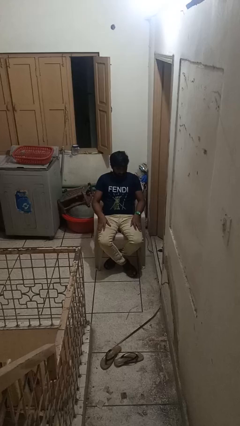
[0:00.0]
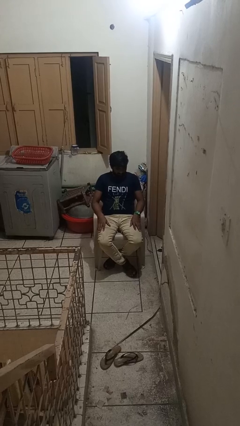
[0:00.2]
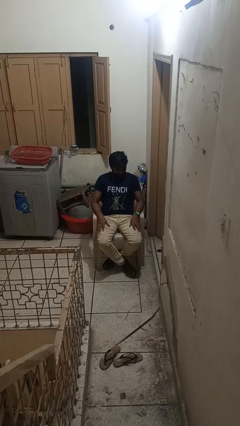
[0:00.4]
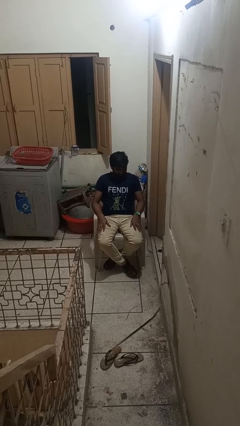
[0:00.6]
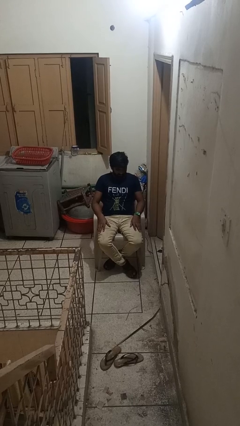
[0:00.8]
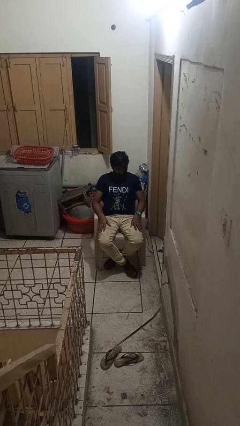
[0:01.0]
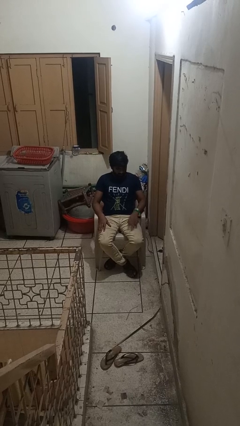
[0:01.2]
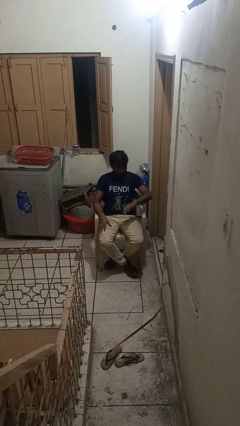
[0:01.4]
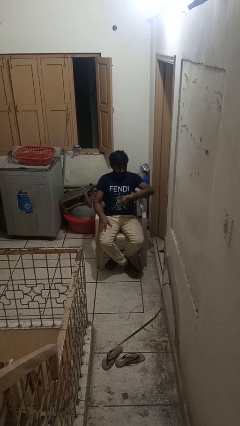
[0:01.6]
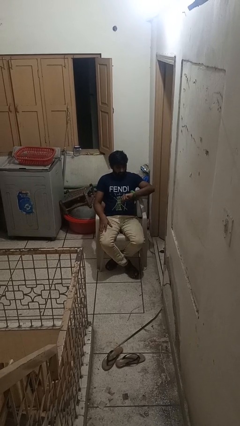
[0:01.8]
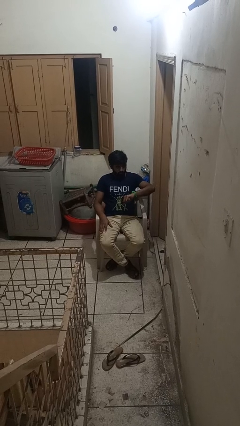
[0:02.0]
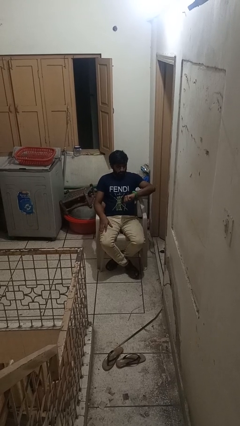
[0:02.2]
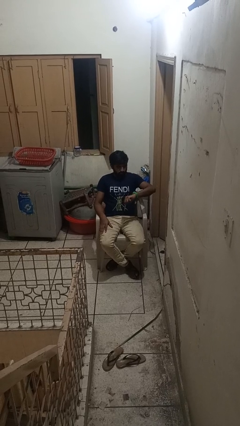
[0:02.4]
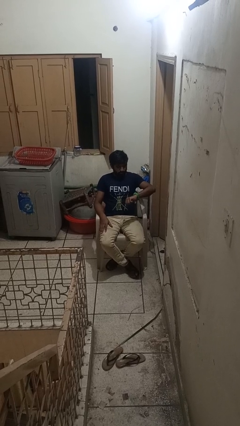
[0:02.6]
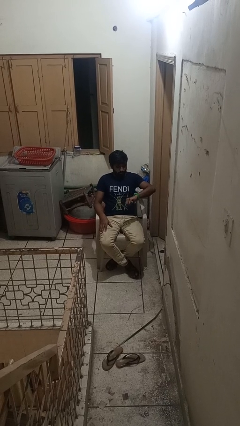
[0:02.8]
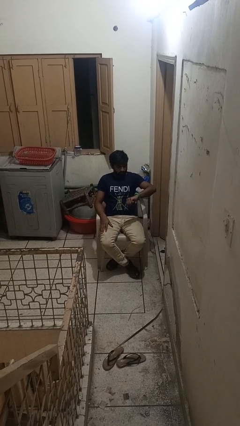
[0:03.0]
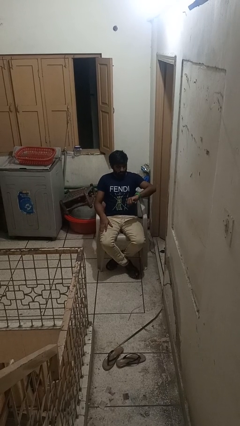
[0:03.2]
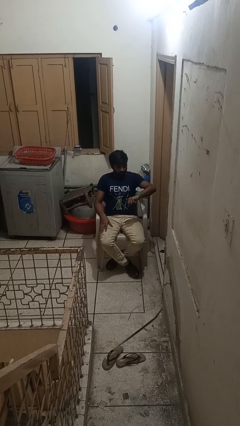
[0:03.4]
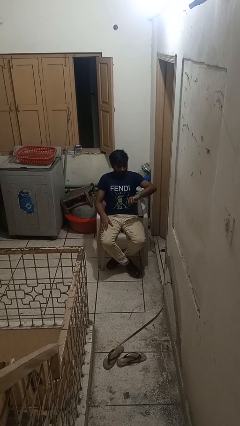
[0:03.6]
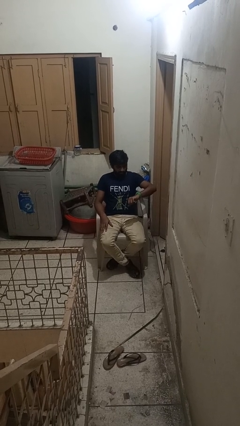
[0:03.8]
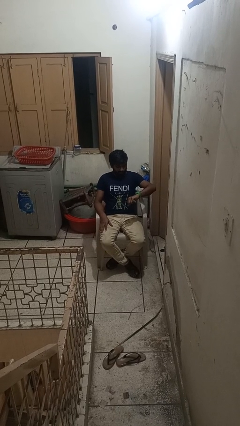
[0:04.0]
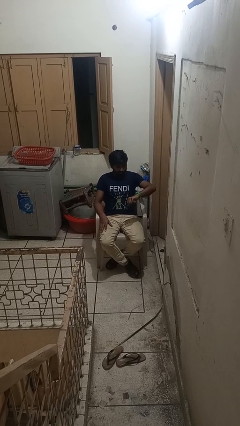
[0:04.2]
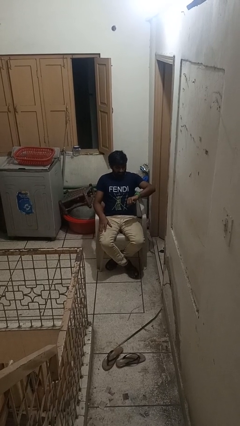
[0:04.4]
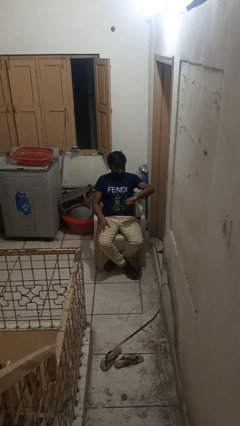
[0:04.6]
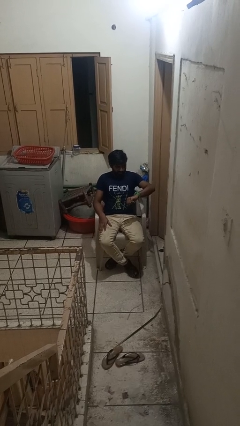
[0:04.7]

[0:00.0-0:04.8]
person looks at wristwatch

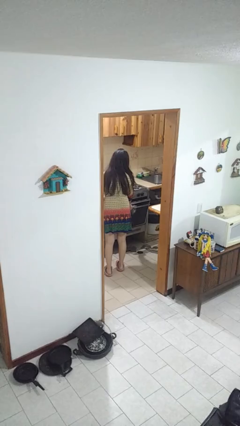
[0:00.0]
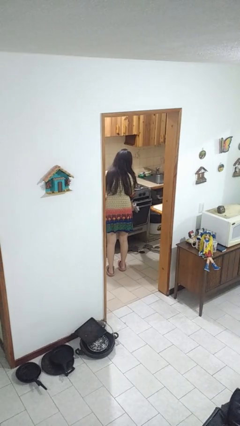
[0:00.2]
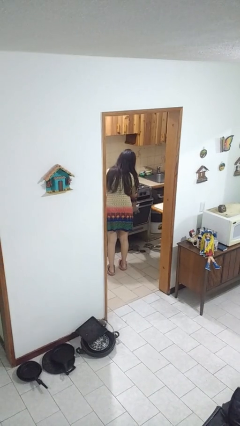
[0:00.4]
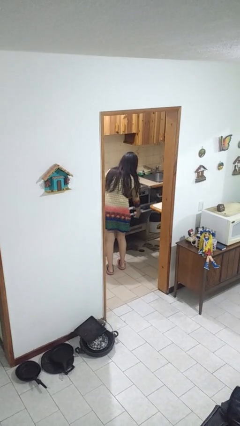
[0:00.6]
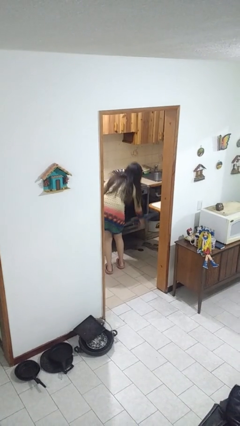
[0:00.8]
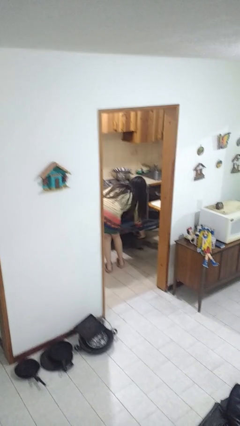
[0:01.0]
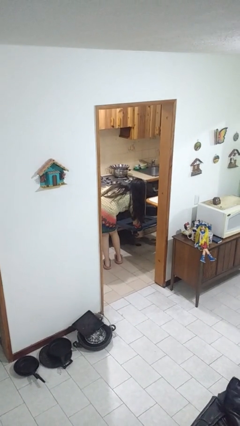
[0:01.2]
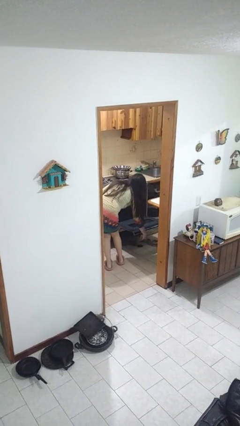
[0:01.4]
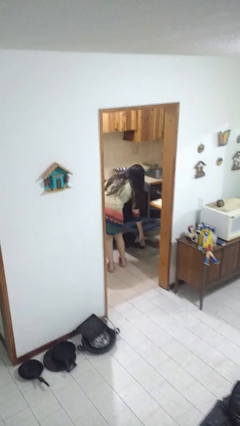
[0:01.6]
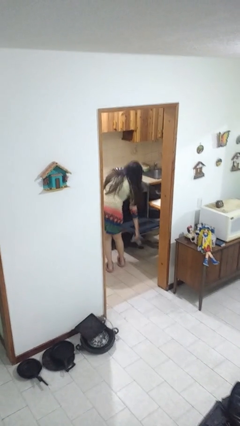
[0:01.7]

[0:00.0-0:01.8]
person opens oven door

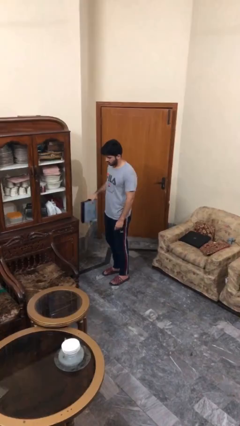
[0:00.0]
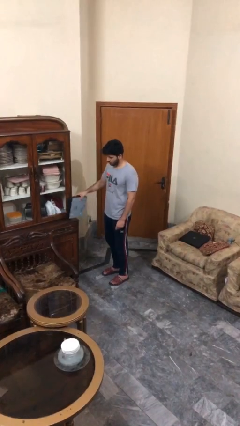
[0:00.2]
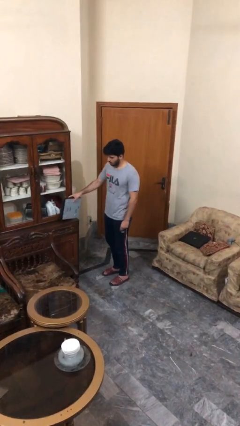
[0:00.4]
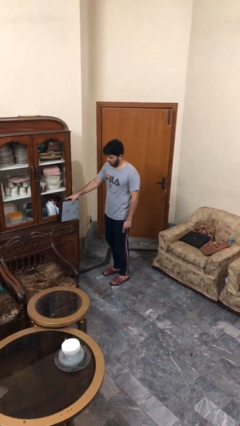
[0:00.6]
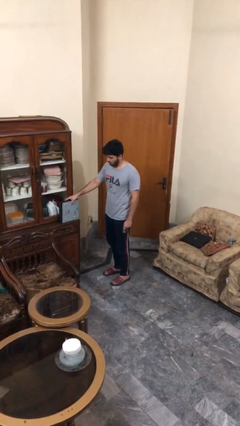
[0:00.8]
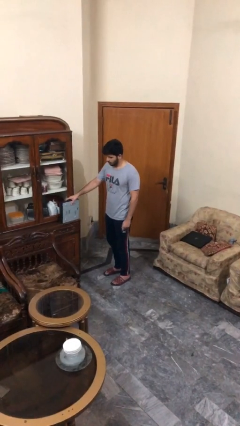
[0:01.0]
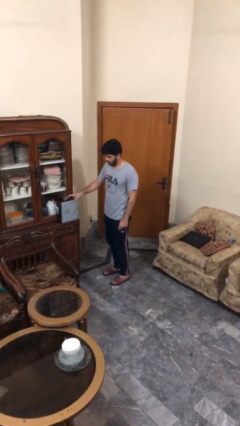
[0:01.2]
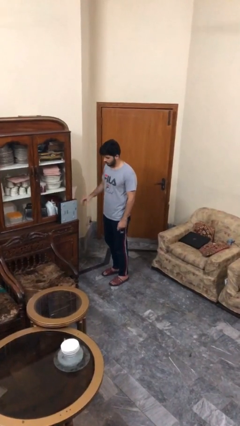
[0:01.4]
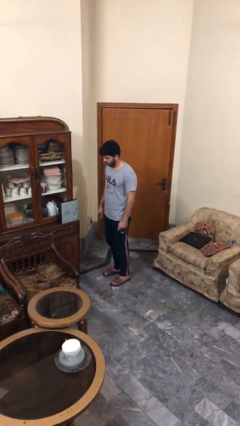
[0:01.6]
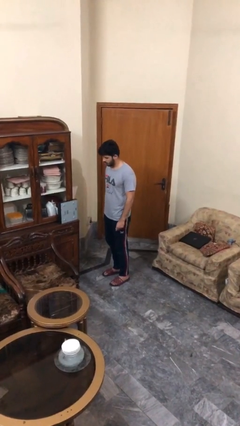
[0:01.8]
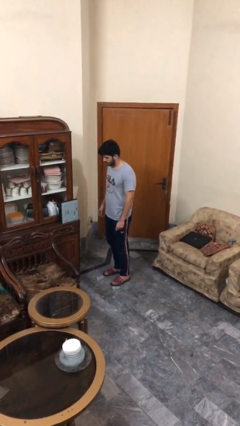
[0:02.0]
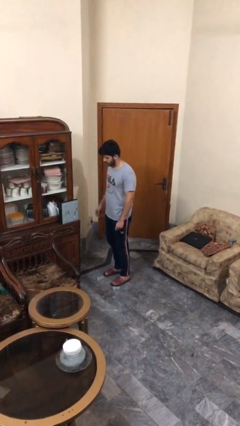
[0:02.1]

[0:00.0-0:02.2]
person puts down object on countertop

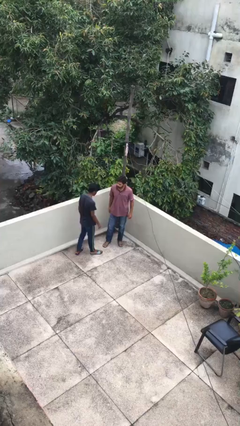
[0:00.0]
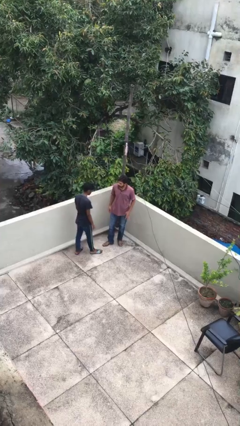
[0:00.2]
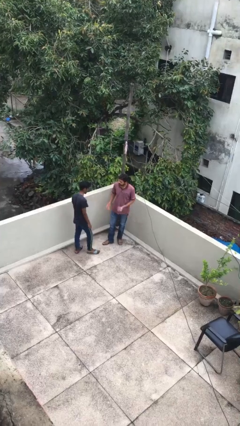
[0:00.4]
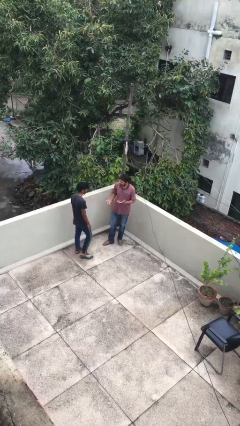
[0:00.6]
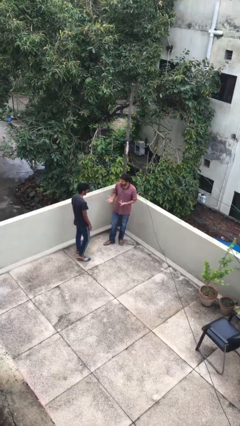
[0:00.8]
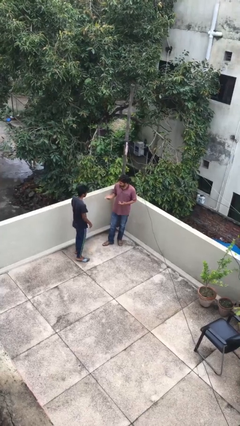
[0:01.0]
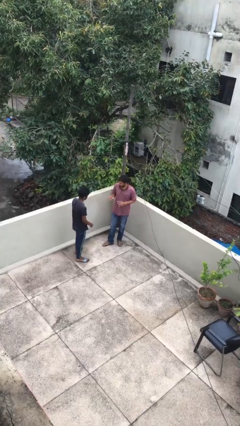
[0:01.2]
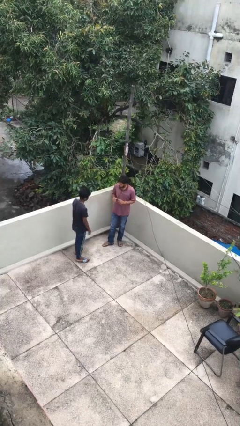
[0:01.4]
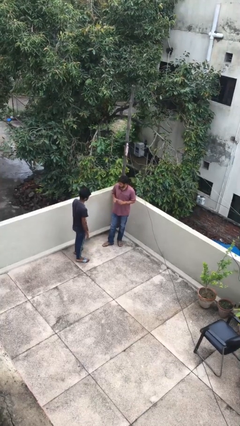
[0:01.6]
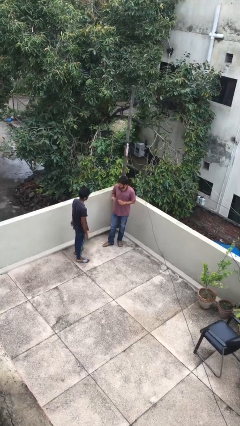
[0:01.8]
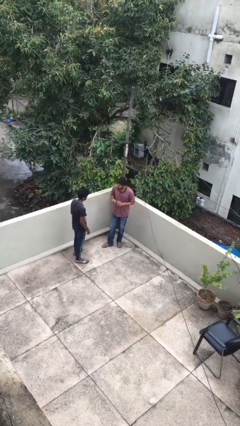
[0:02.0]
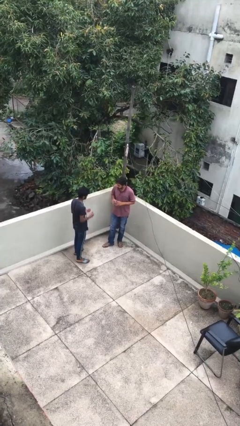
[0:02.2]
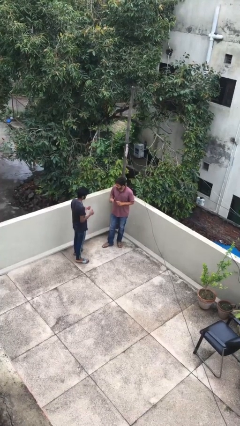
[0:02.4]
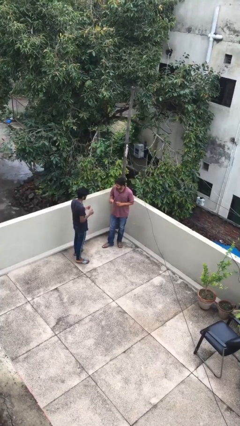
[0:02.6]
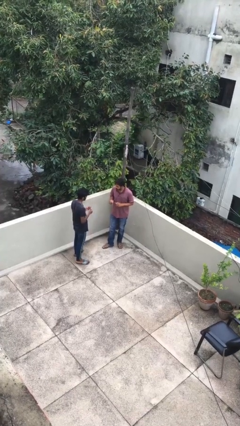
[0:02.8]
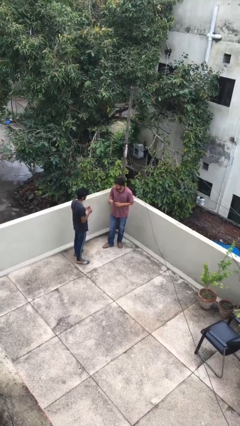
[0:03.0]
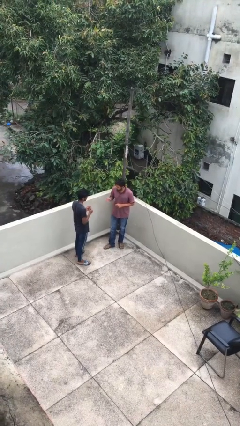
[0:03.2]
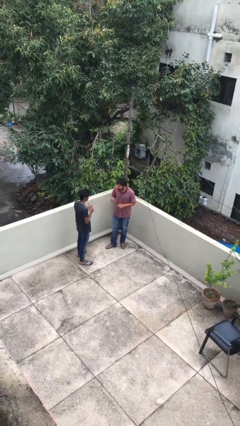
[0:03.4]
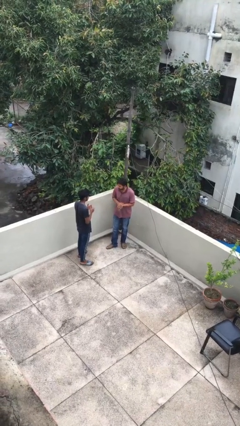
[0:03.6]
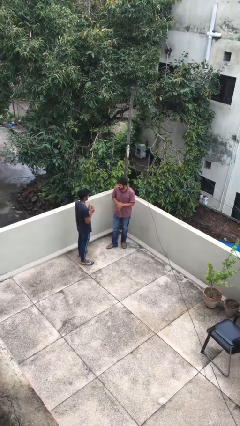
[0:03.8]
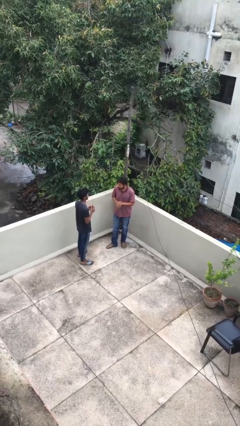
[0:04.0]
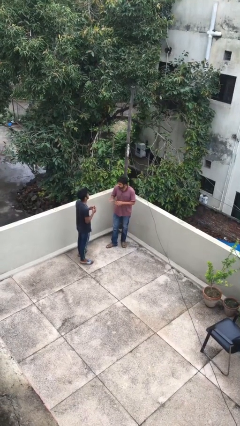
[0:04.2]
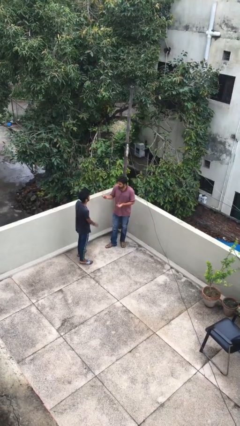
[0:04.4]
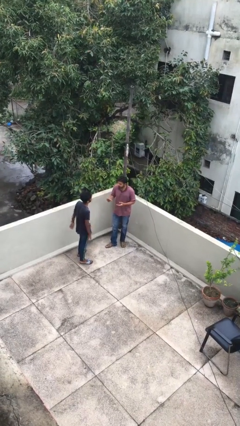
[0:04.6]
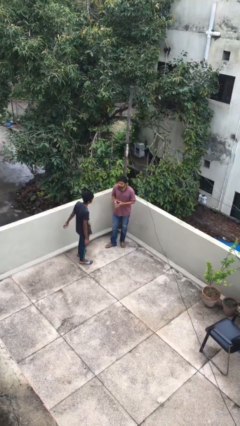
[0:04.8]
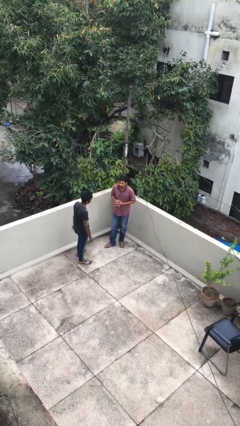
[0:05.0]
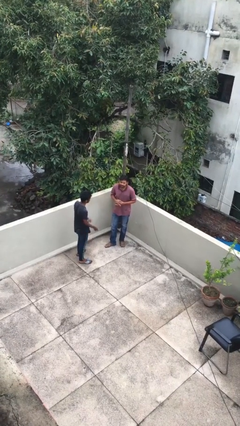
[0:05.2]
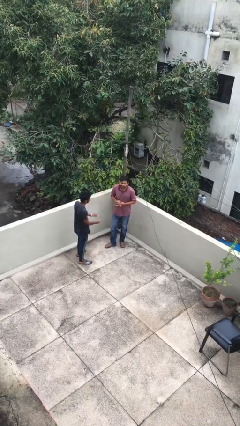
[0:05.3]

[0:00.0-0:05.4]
person talks to person

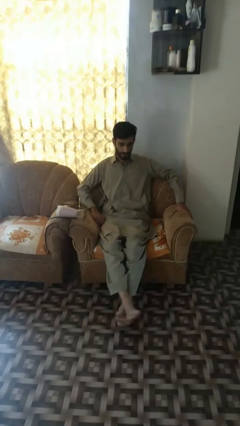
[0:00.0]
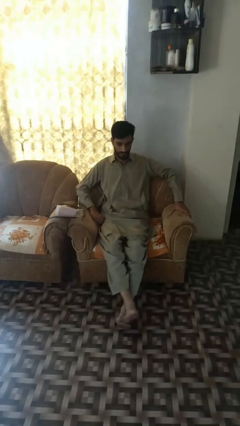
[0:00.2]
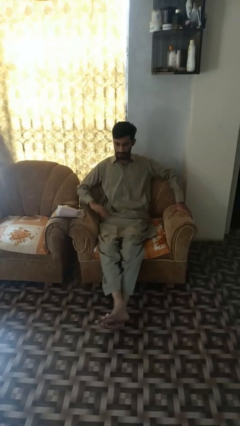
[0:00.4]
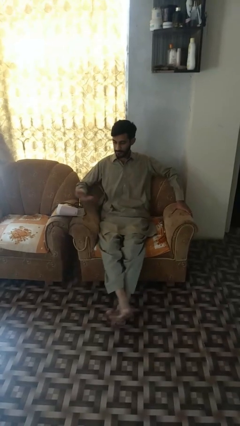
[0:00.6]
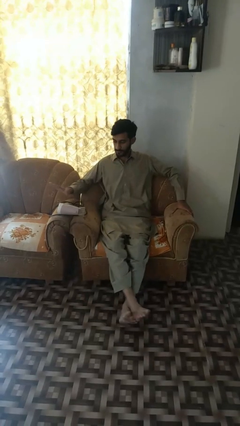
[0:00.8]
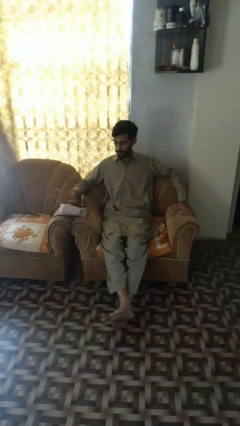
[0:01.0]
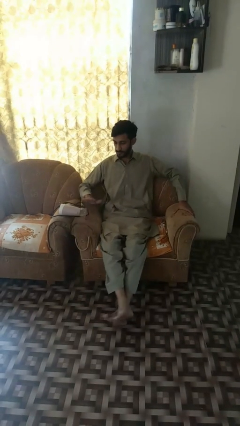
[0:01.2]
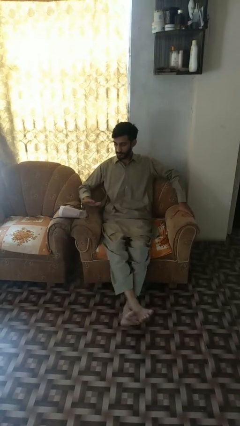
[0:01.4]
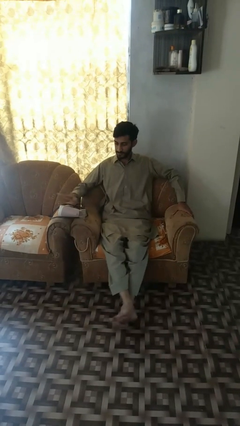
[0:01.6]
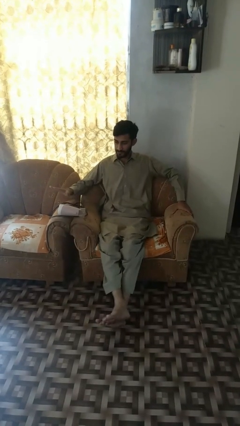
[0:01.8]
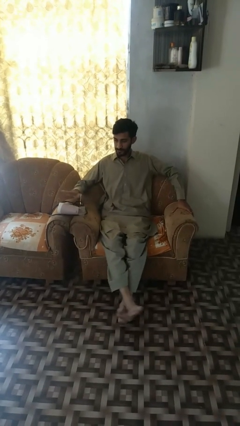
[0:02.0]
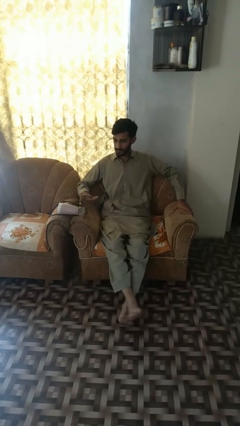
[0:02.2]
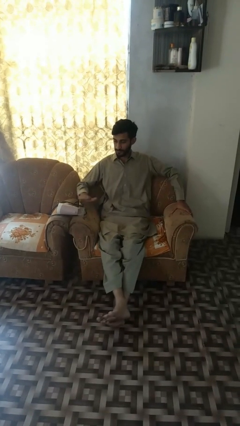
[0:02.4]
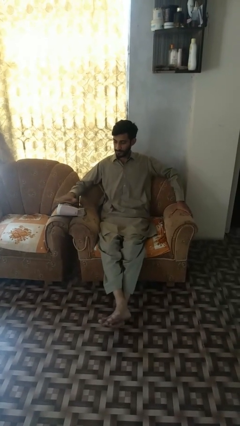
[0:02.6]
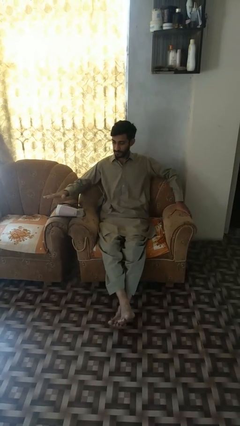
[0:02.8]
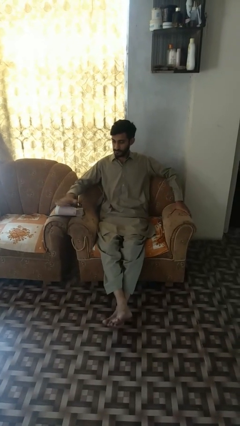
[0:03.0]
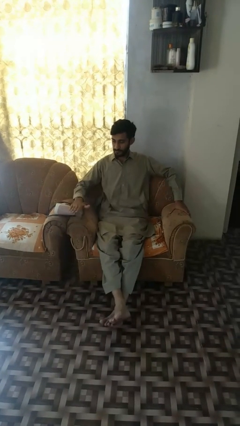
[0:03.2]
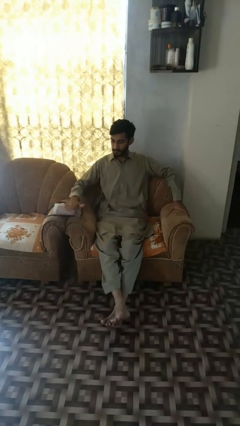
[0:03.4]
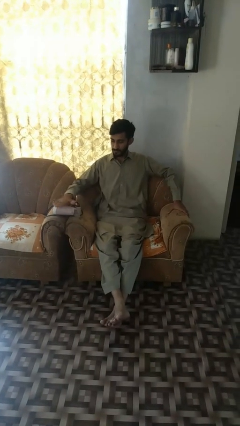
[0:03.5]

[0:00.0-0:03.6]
person waves hand over object
